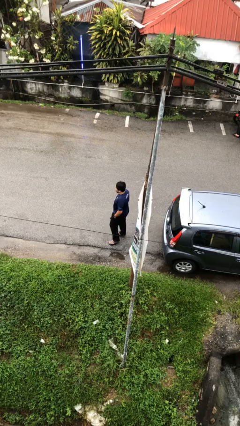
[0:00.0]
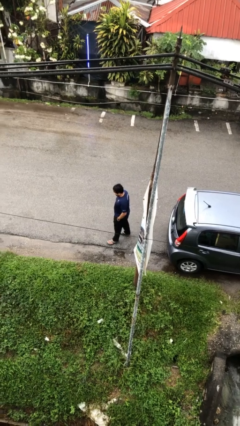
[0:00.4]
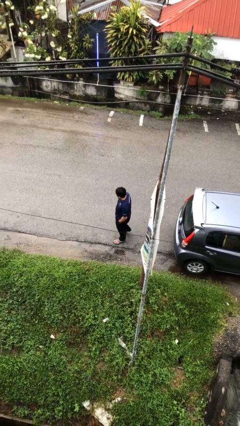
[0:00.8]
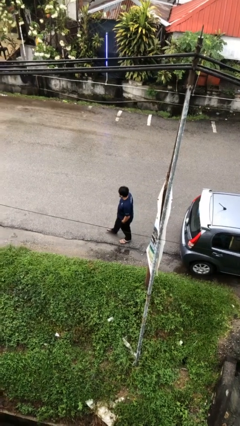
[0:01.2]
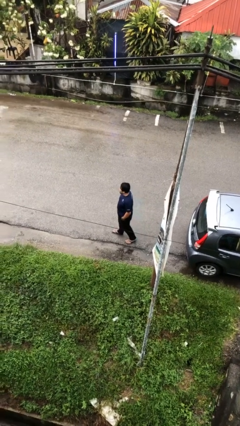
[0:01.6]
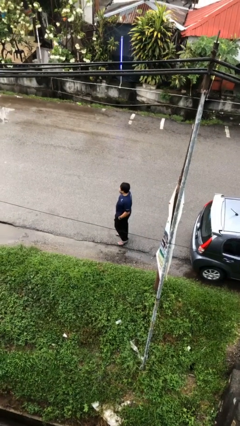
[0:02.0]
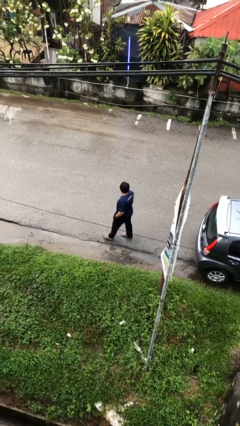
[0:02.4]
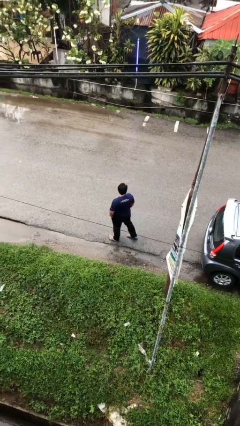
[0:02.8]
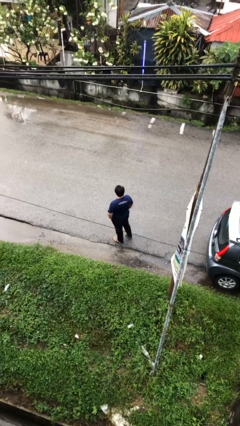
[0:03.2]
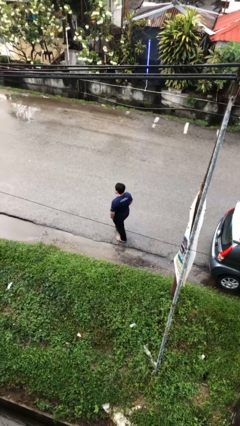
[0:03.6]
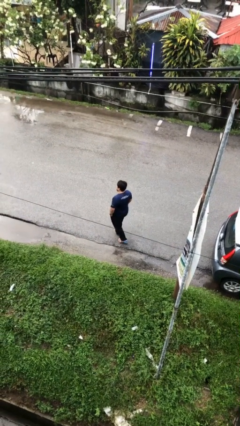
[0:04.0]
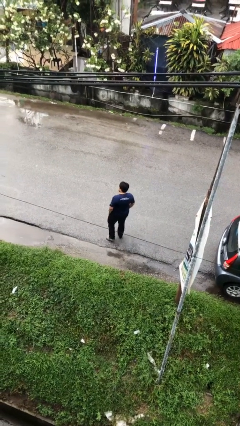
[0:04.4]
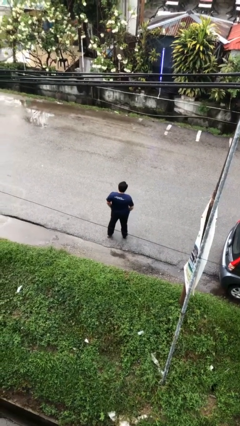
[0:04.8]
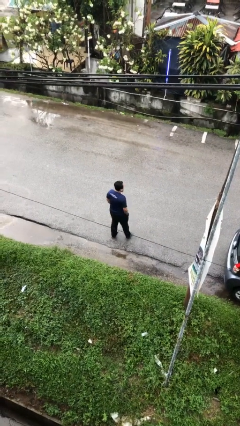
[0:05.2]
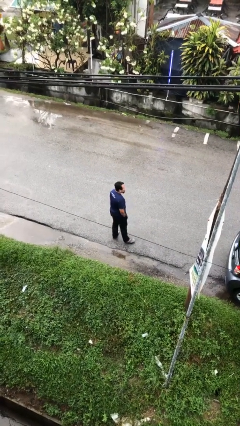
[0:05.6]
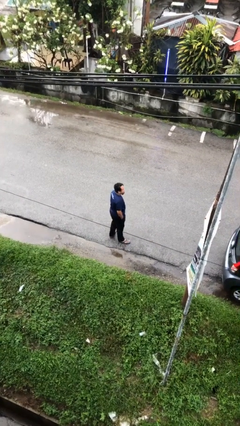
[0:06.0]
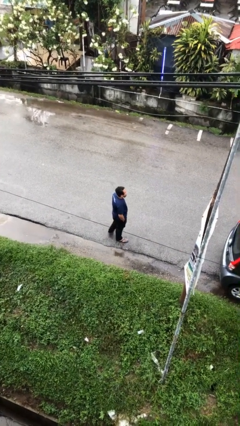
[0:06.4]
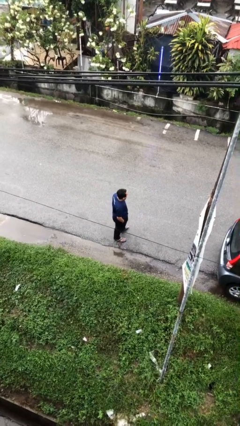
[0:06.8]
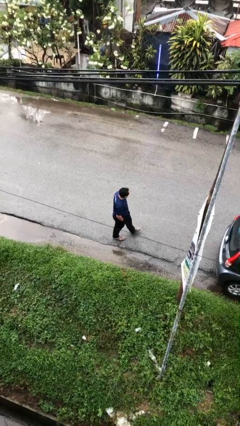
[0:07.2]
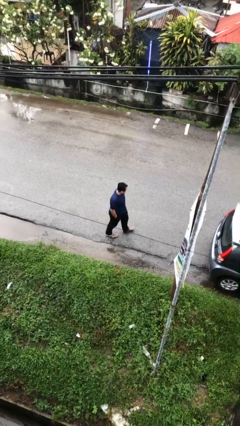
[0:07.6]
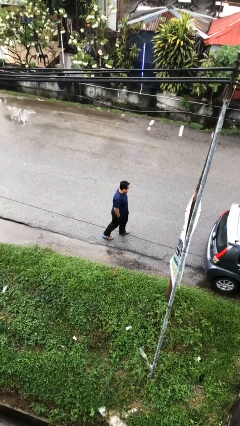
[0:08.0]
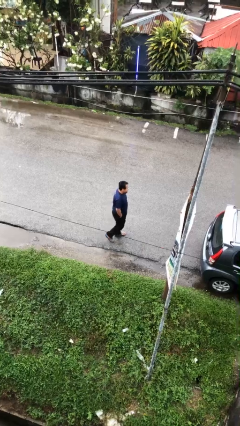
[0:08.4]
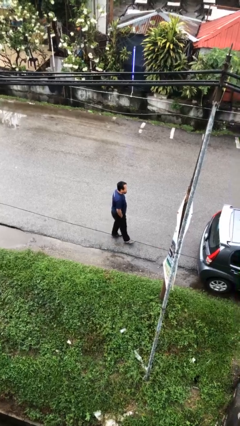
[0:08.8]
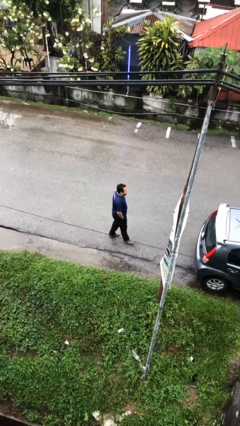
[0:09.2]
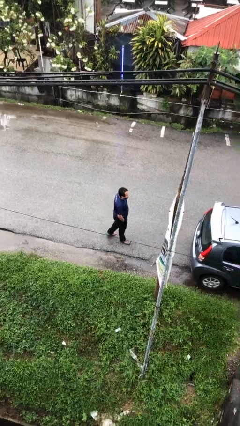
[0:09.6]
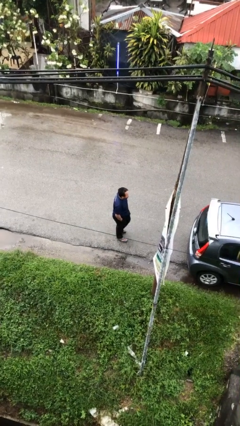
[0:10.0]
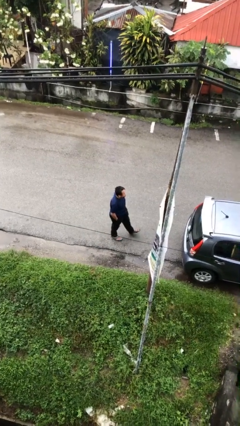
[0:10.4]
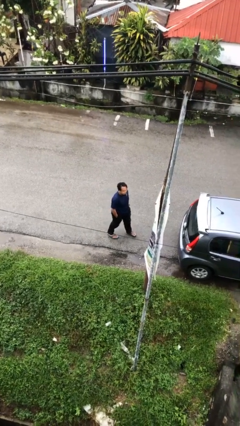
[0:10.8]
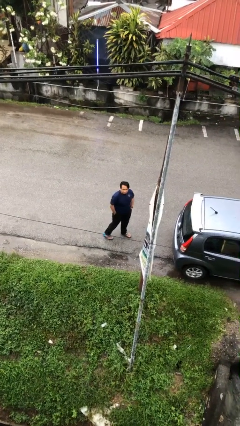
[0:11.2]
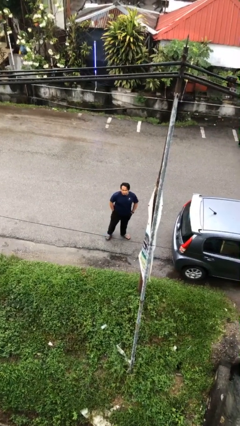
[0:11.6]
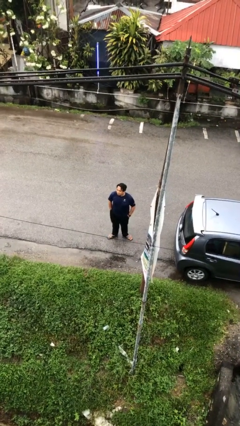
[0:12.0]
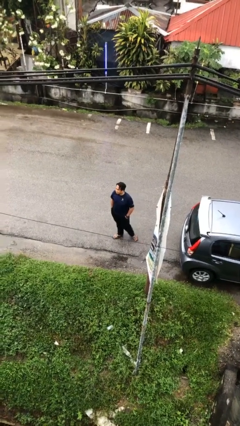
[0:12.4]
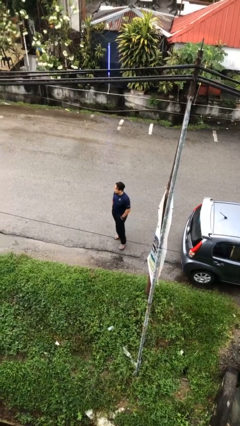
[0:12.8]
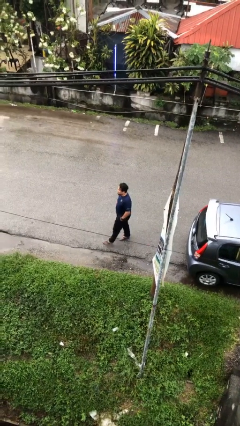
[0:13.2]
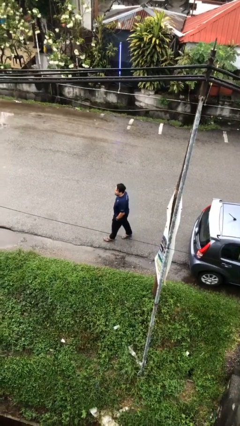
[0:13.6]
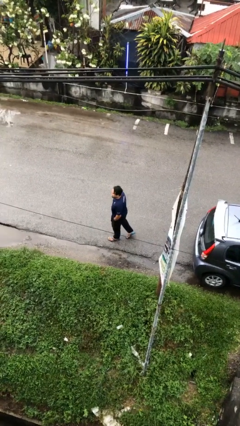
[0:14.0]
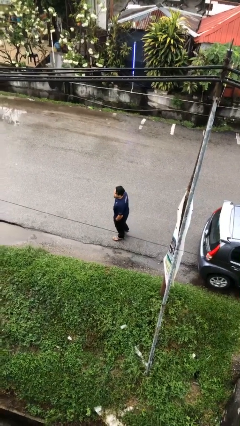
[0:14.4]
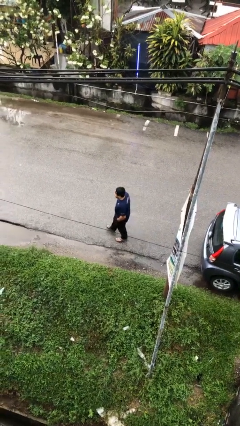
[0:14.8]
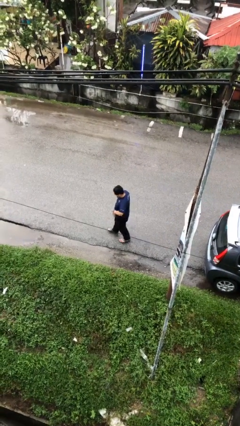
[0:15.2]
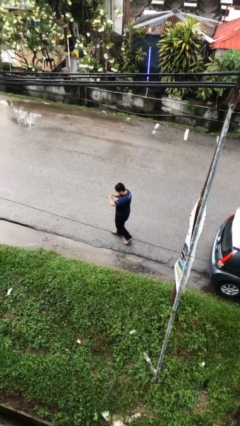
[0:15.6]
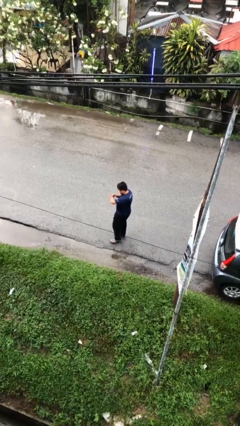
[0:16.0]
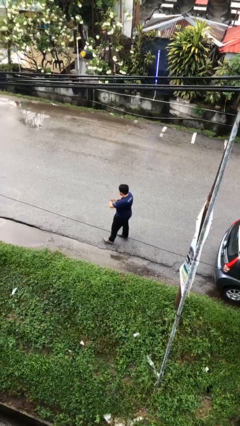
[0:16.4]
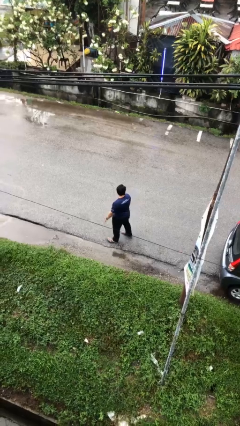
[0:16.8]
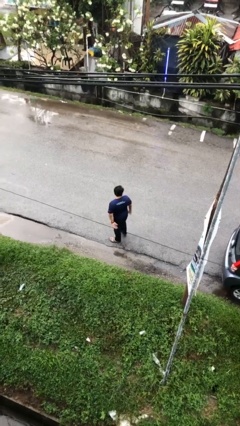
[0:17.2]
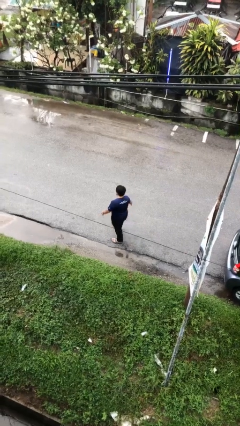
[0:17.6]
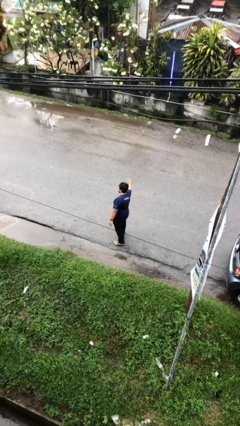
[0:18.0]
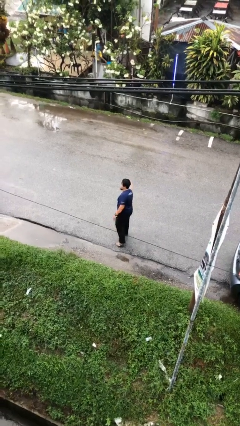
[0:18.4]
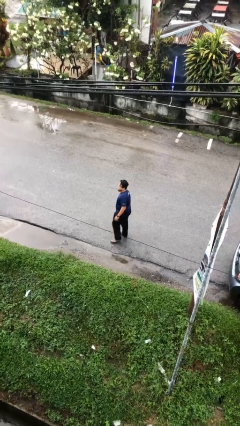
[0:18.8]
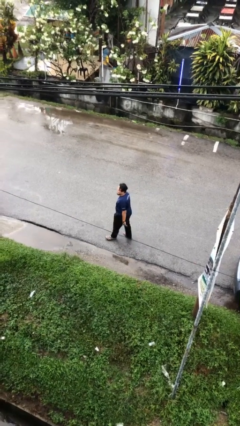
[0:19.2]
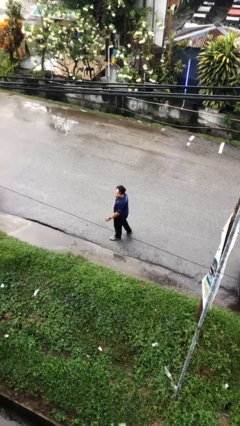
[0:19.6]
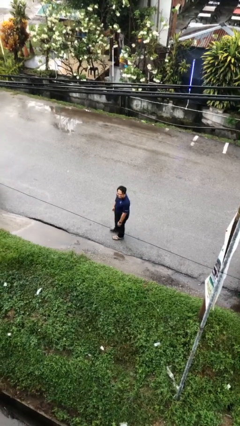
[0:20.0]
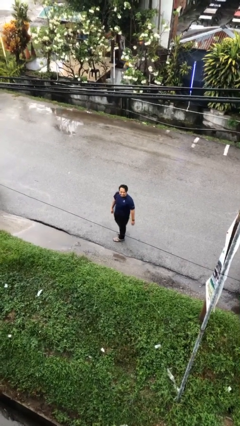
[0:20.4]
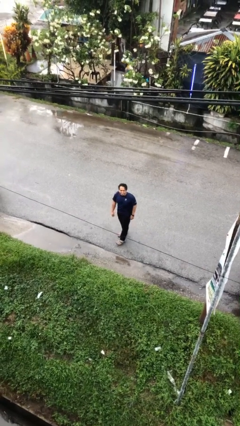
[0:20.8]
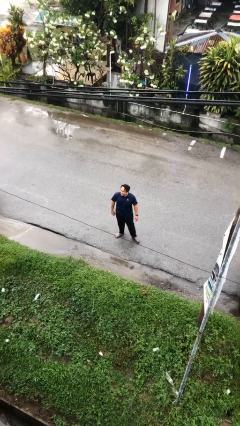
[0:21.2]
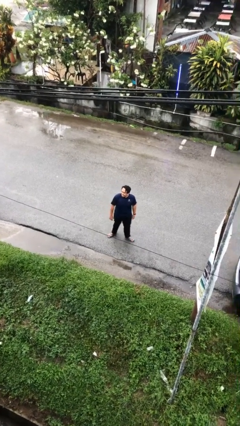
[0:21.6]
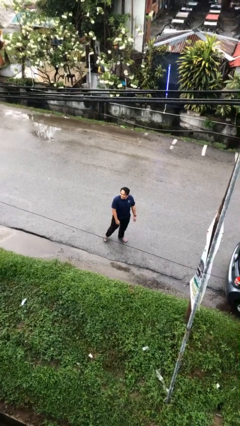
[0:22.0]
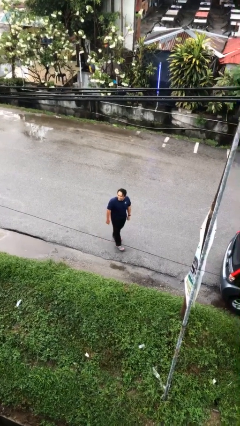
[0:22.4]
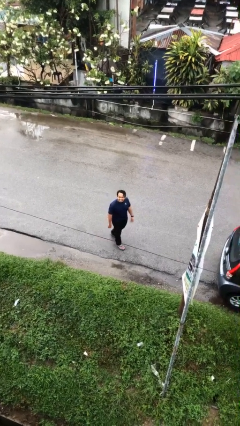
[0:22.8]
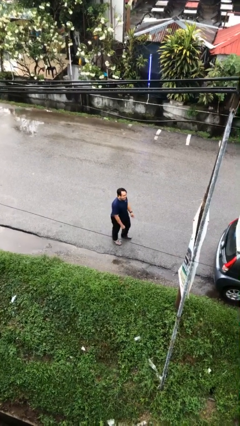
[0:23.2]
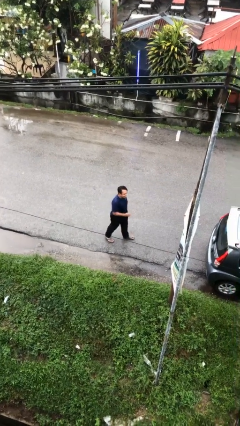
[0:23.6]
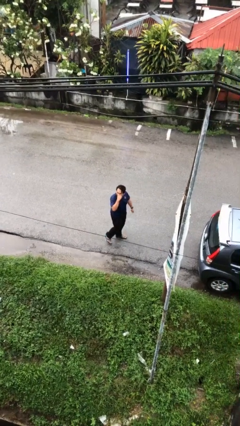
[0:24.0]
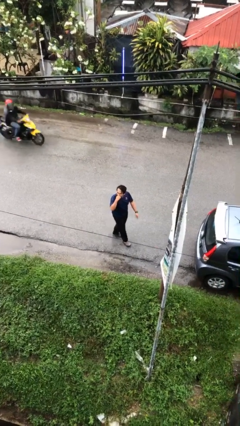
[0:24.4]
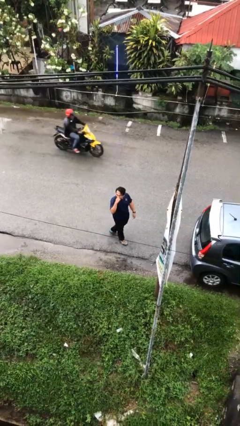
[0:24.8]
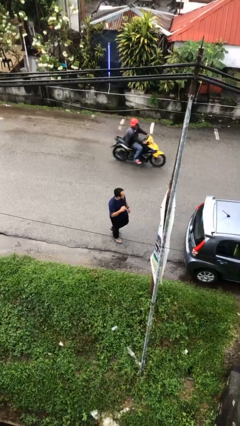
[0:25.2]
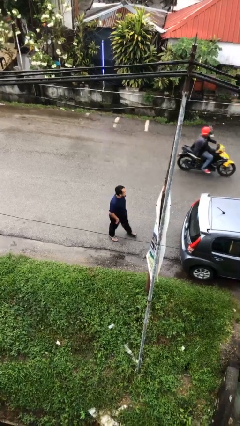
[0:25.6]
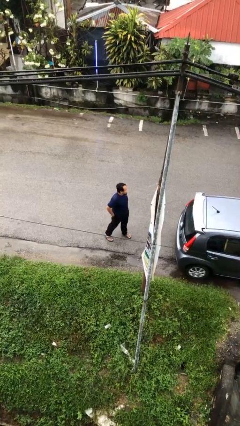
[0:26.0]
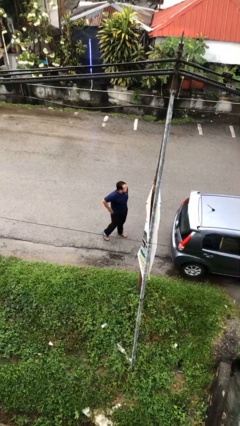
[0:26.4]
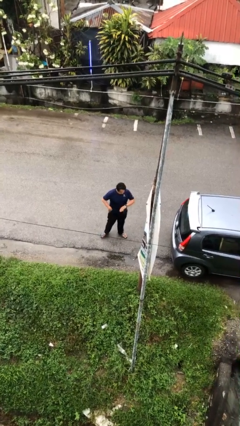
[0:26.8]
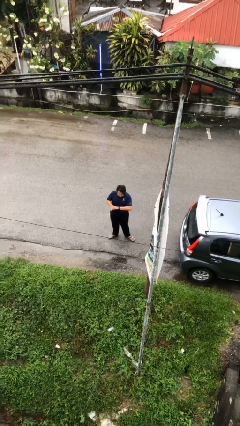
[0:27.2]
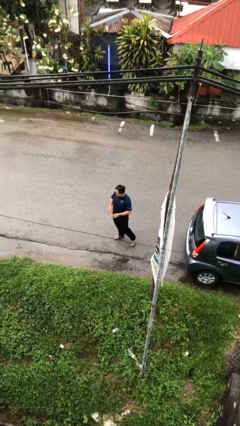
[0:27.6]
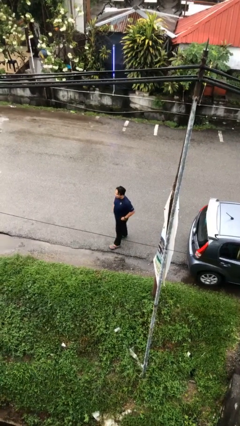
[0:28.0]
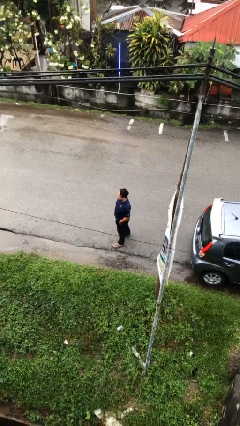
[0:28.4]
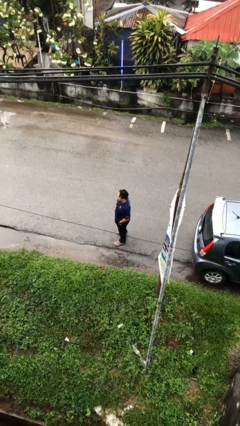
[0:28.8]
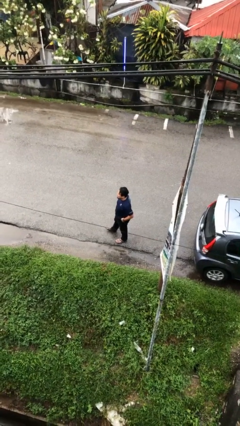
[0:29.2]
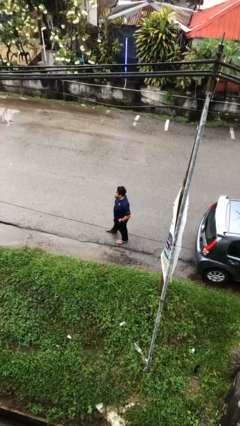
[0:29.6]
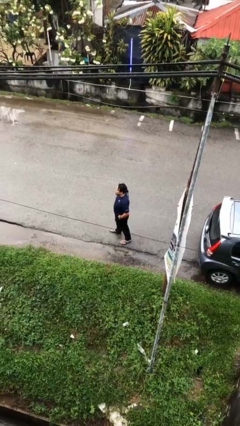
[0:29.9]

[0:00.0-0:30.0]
person walks

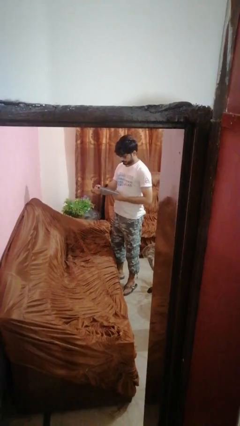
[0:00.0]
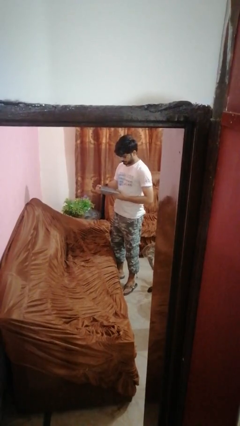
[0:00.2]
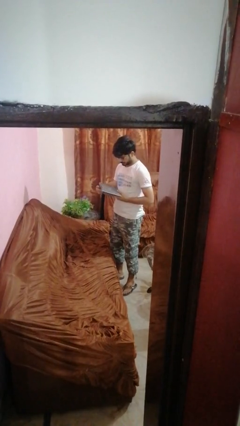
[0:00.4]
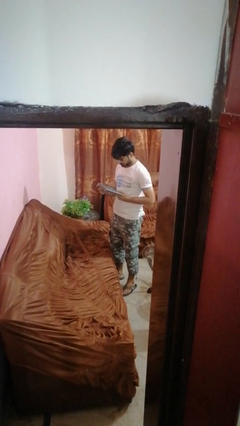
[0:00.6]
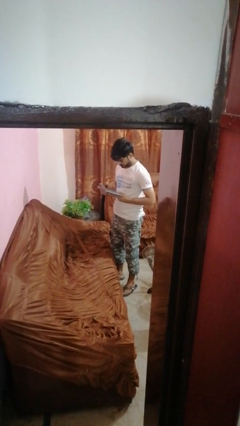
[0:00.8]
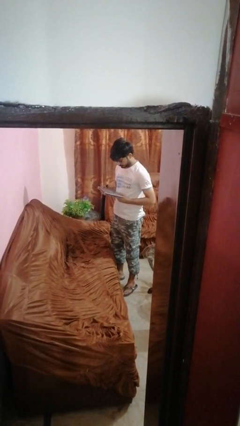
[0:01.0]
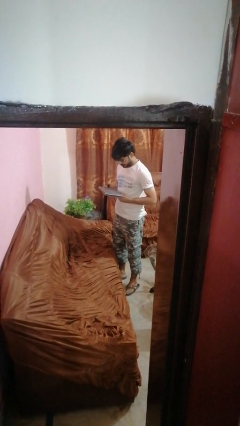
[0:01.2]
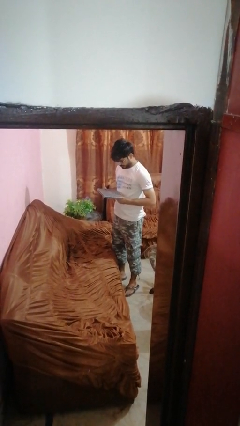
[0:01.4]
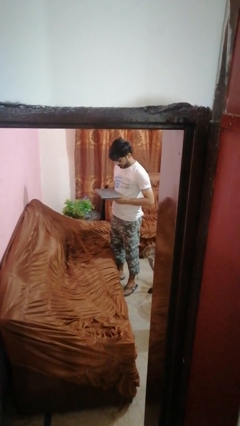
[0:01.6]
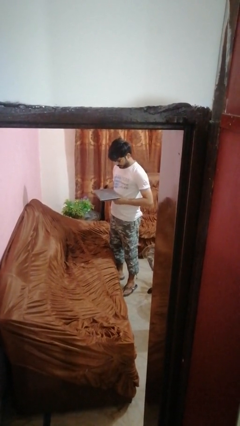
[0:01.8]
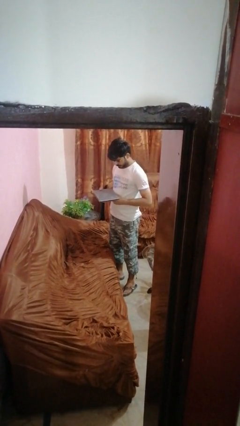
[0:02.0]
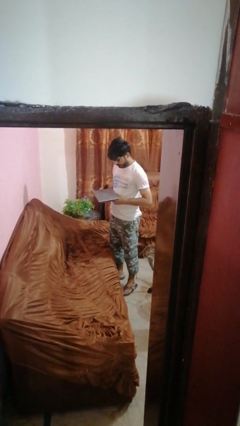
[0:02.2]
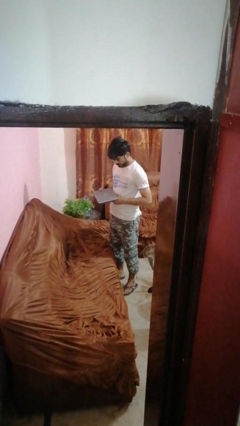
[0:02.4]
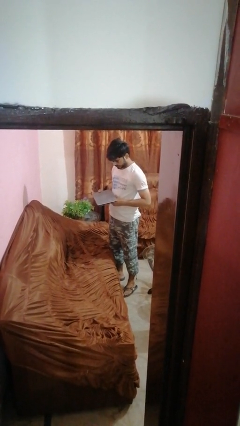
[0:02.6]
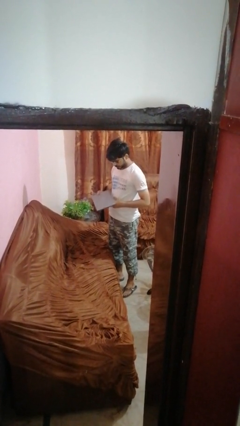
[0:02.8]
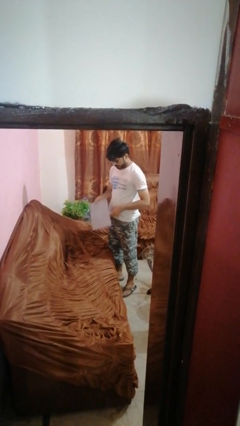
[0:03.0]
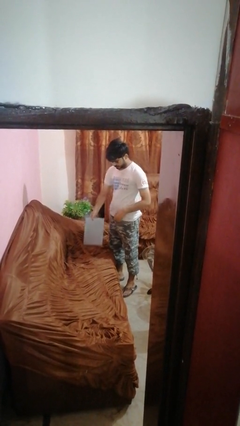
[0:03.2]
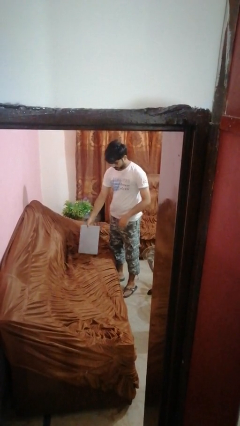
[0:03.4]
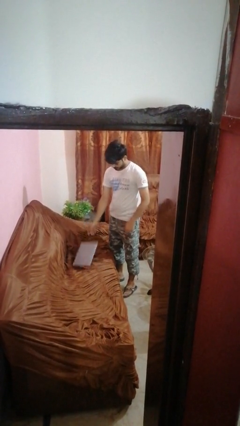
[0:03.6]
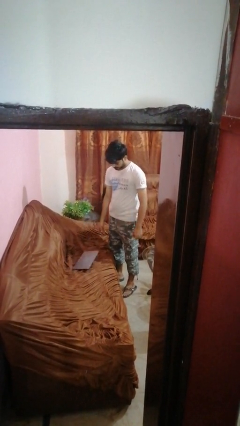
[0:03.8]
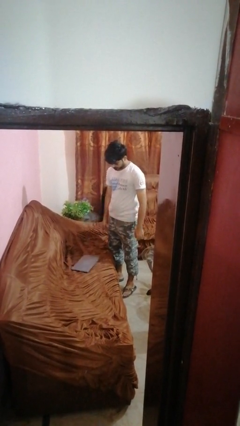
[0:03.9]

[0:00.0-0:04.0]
person puts down object on couch
